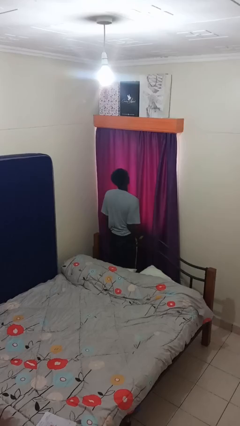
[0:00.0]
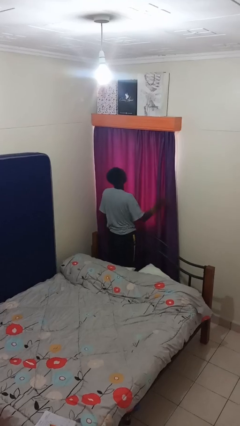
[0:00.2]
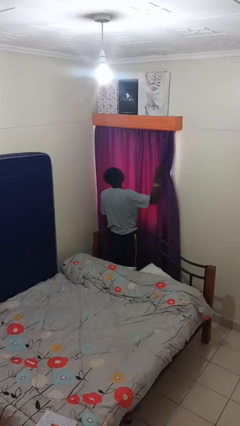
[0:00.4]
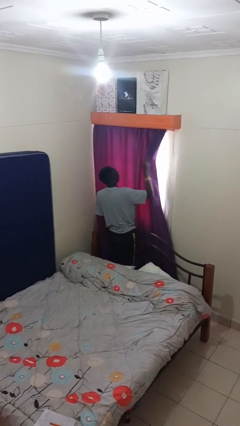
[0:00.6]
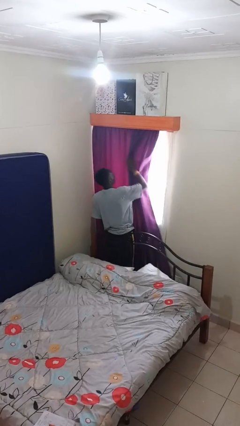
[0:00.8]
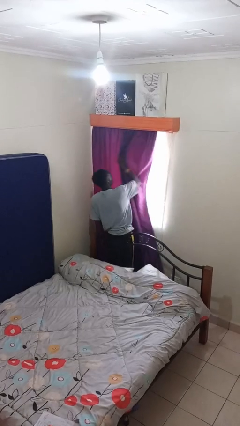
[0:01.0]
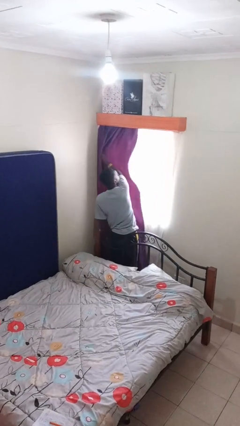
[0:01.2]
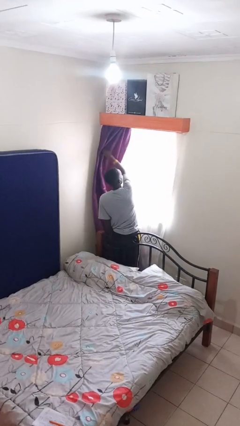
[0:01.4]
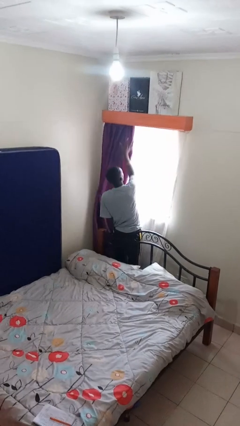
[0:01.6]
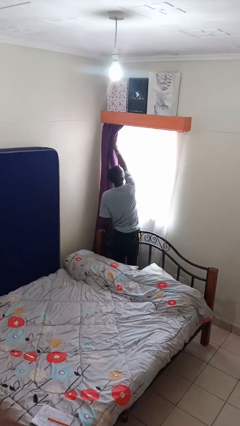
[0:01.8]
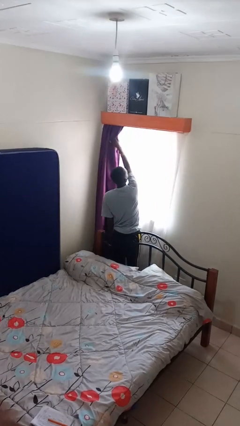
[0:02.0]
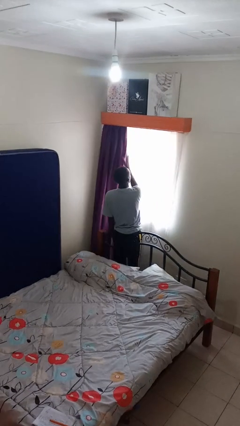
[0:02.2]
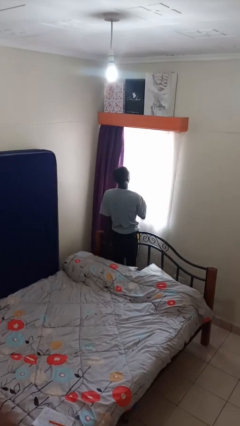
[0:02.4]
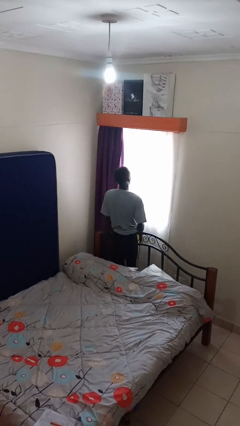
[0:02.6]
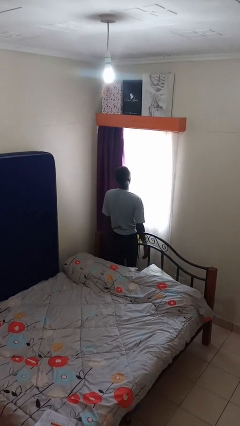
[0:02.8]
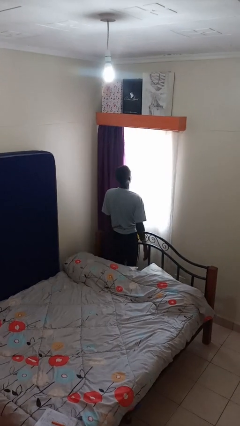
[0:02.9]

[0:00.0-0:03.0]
person opens curtains

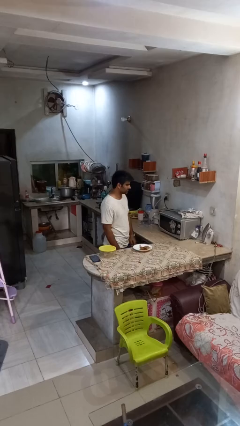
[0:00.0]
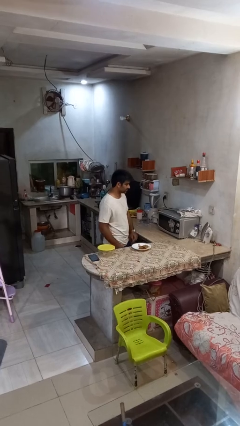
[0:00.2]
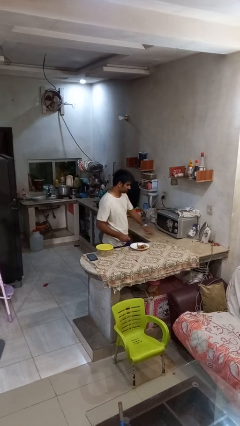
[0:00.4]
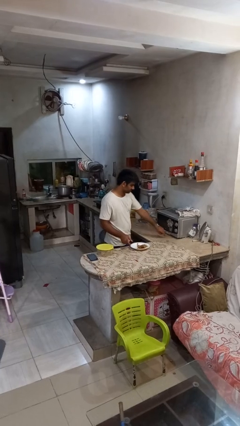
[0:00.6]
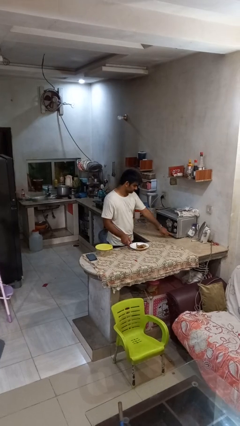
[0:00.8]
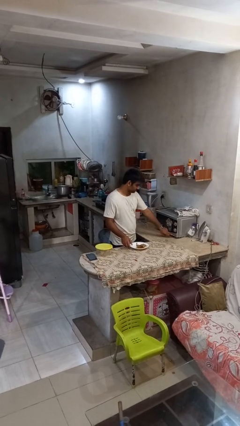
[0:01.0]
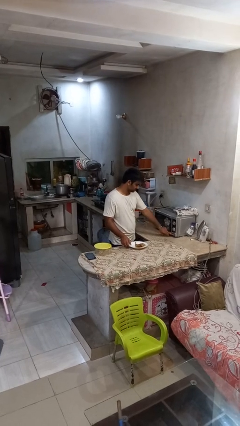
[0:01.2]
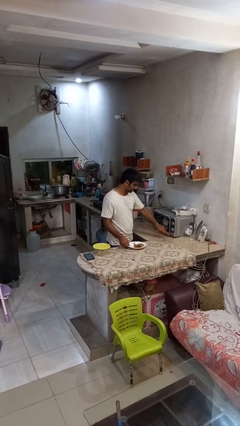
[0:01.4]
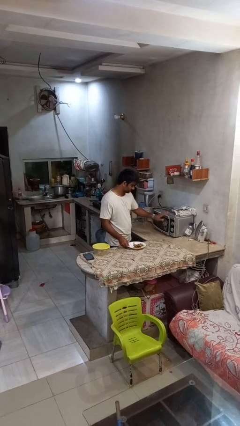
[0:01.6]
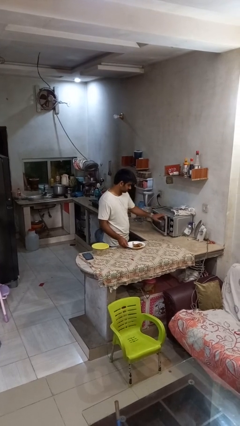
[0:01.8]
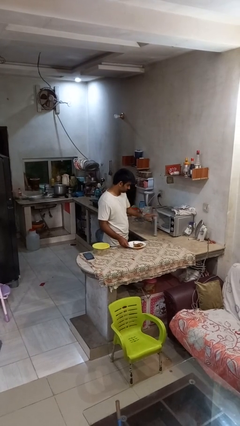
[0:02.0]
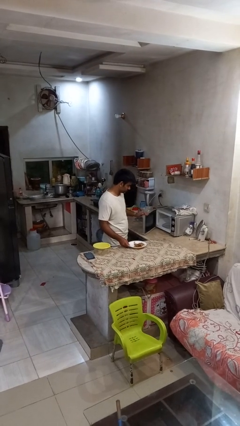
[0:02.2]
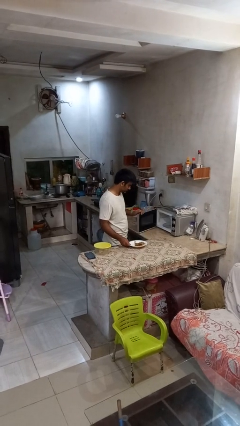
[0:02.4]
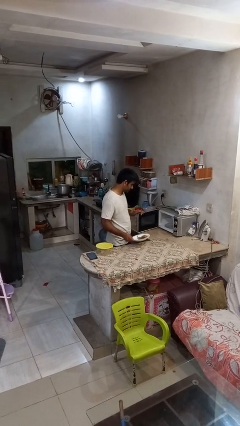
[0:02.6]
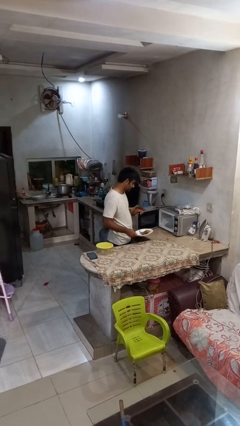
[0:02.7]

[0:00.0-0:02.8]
person opens microwave

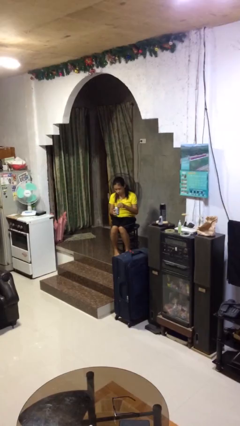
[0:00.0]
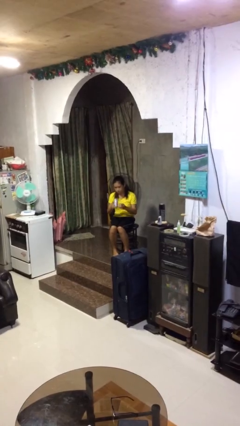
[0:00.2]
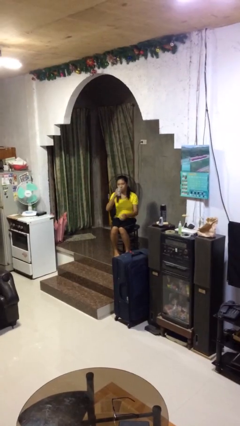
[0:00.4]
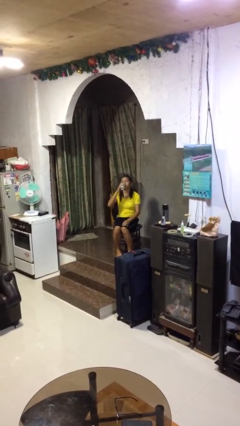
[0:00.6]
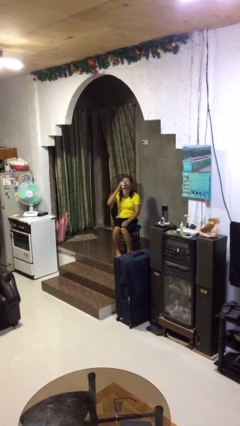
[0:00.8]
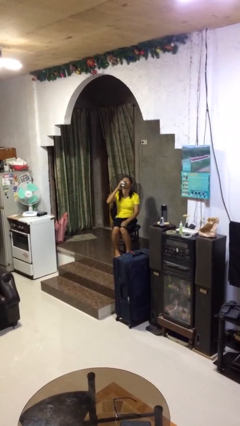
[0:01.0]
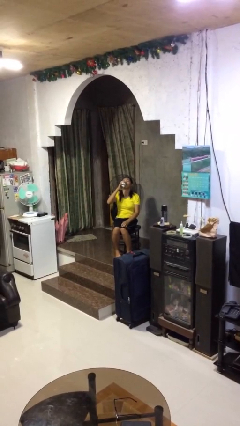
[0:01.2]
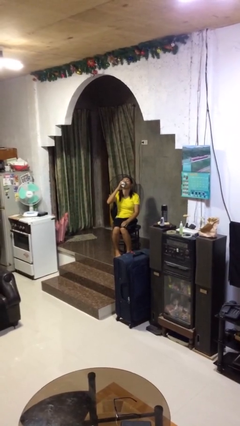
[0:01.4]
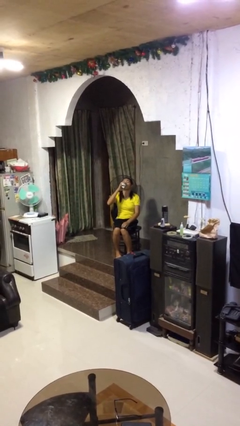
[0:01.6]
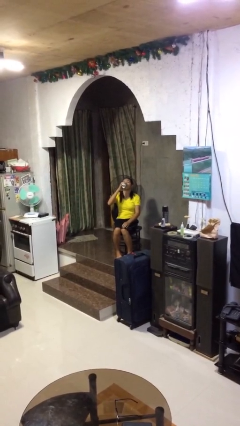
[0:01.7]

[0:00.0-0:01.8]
person drinks from beverage can

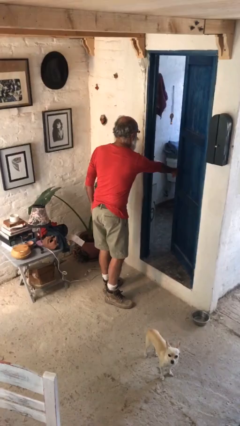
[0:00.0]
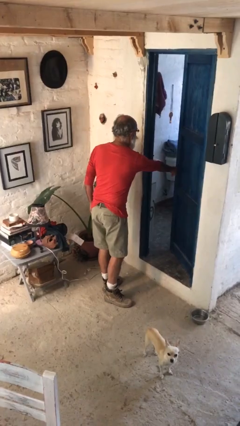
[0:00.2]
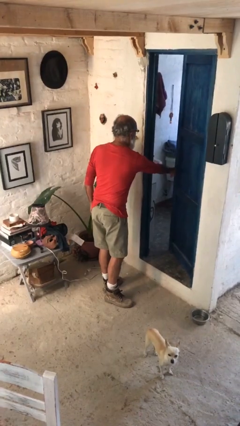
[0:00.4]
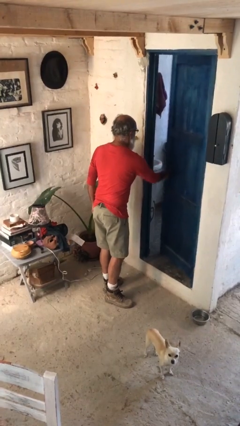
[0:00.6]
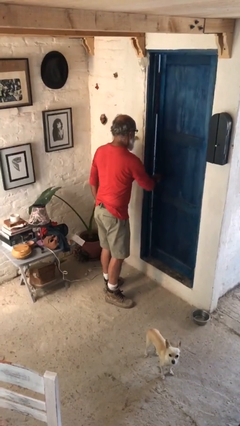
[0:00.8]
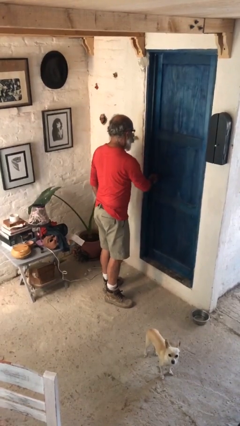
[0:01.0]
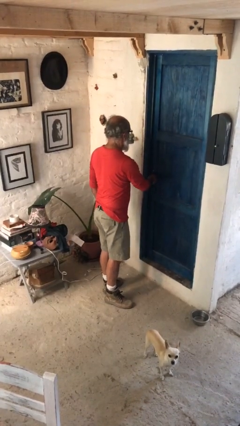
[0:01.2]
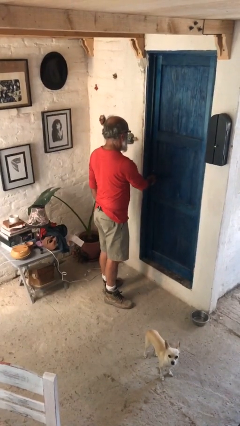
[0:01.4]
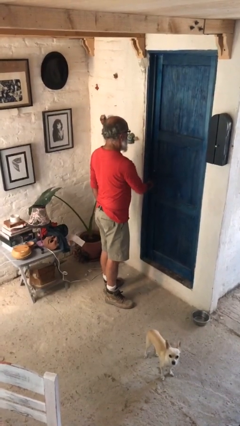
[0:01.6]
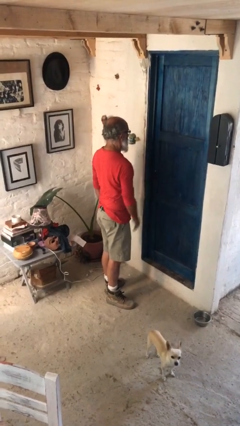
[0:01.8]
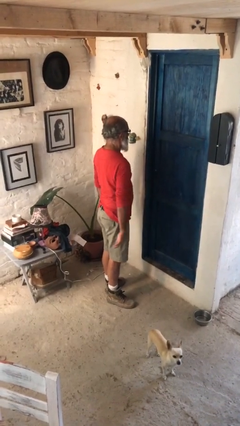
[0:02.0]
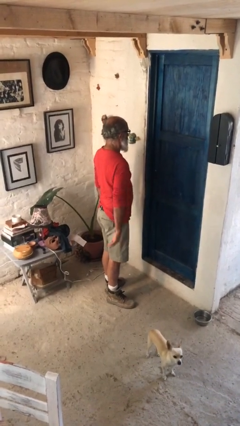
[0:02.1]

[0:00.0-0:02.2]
person closes facility door

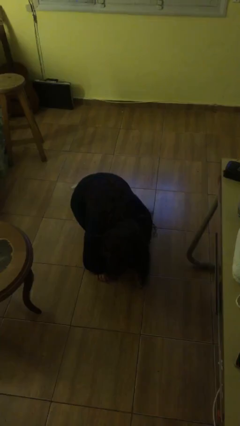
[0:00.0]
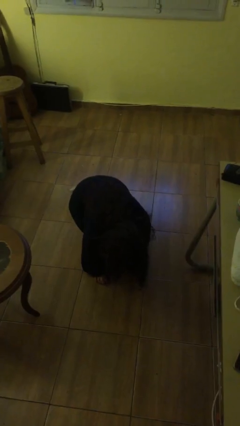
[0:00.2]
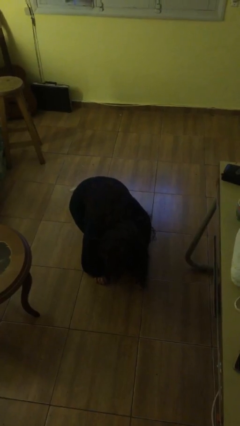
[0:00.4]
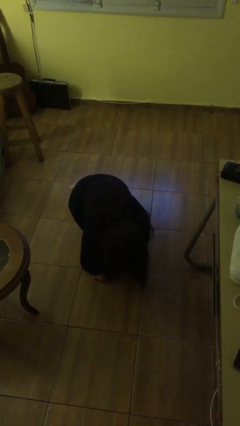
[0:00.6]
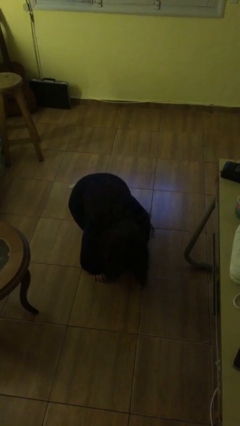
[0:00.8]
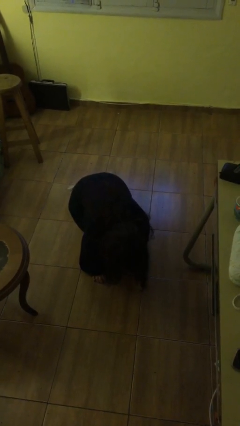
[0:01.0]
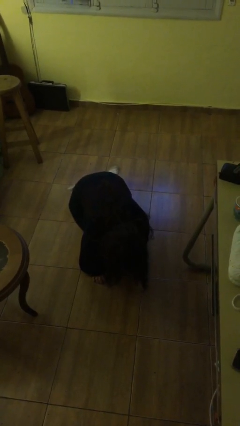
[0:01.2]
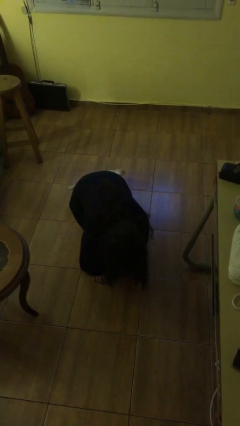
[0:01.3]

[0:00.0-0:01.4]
person crawls

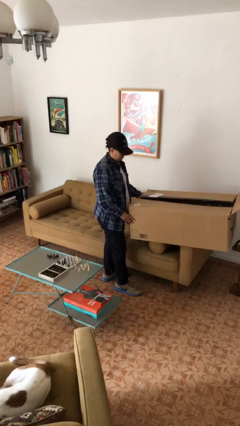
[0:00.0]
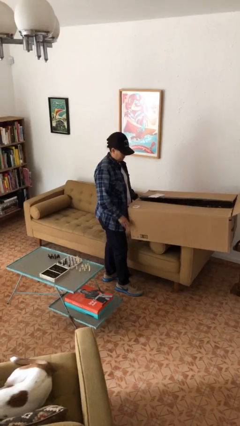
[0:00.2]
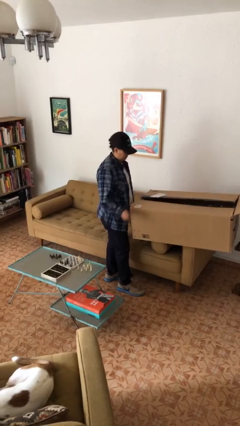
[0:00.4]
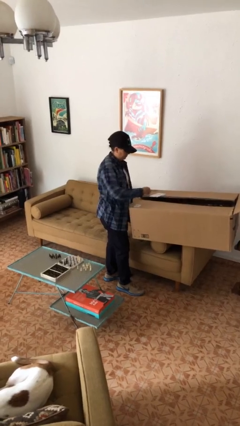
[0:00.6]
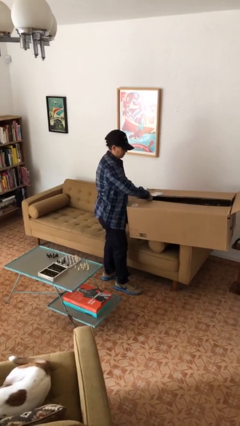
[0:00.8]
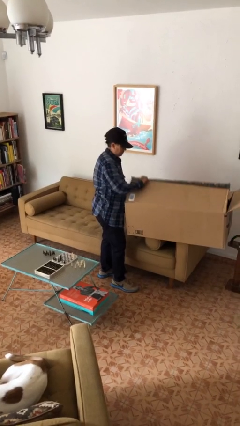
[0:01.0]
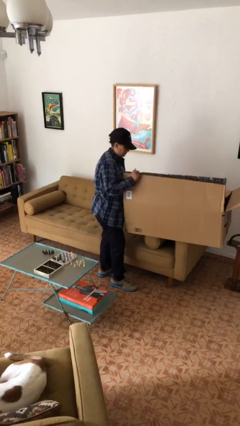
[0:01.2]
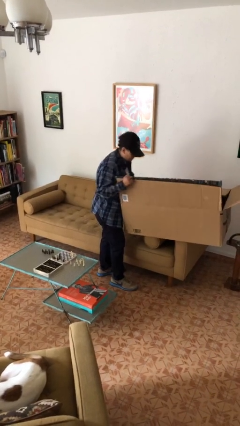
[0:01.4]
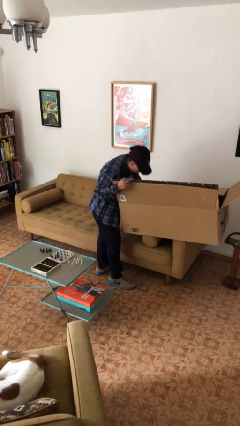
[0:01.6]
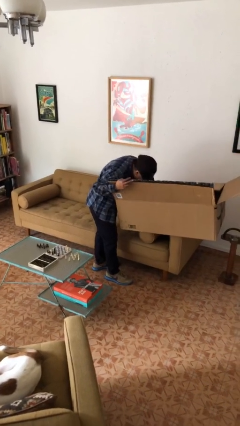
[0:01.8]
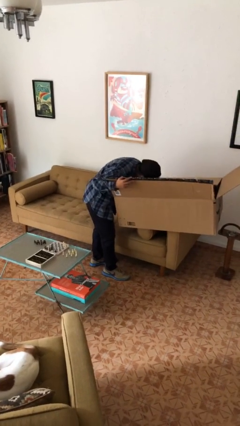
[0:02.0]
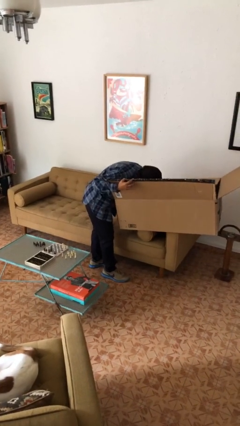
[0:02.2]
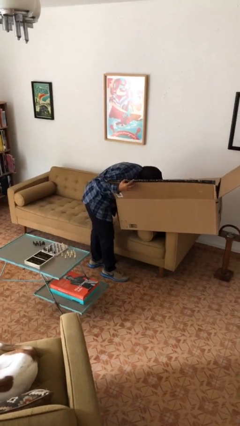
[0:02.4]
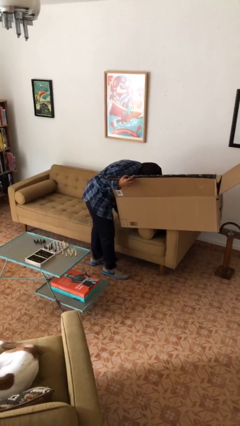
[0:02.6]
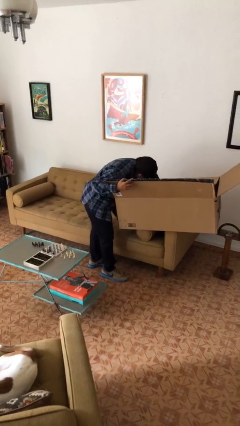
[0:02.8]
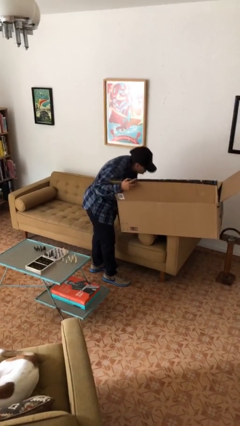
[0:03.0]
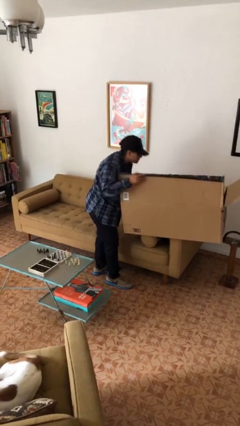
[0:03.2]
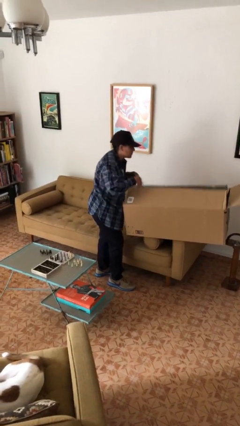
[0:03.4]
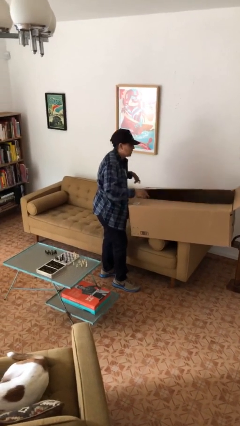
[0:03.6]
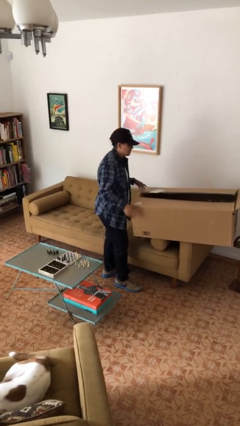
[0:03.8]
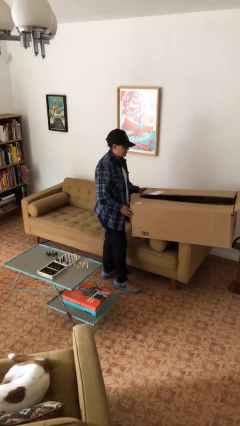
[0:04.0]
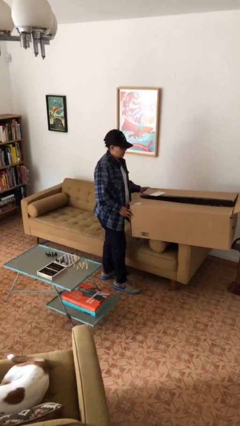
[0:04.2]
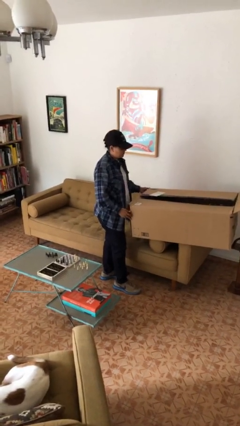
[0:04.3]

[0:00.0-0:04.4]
person searches in box

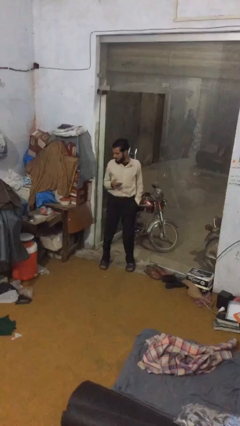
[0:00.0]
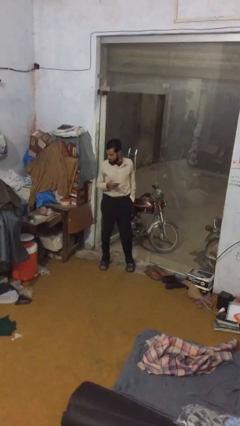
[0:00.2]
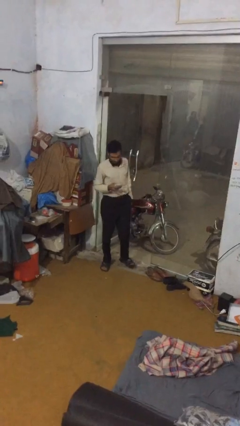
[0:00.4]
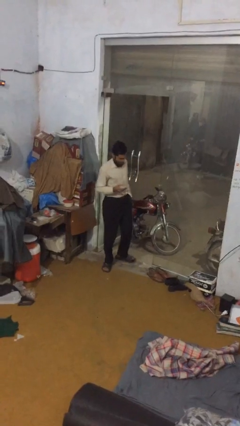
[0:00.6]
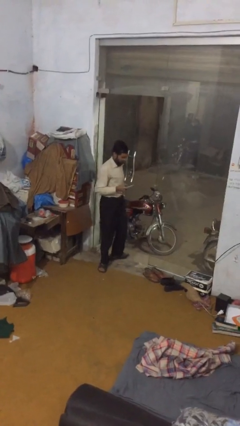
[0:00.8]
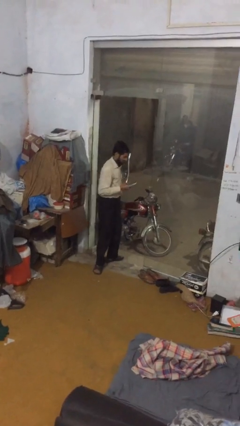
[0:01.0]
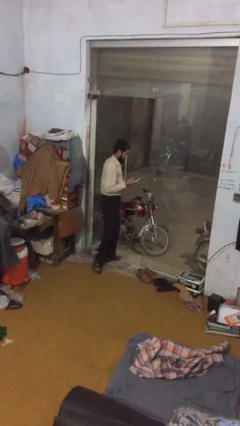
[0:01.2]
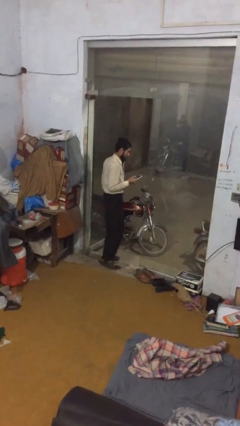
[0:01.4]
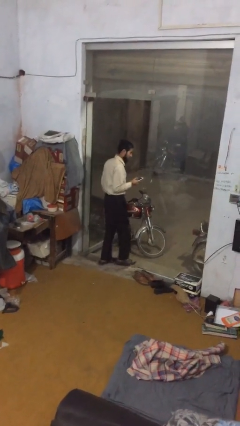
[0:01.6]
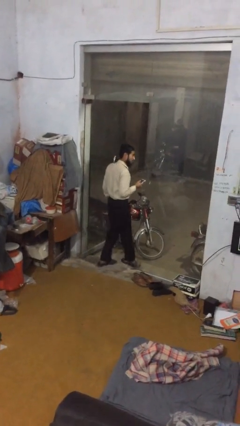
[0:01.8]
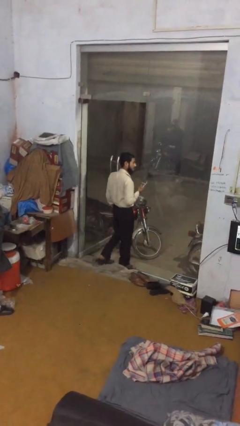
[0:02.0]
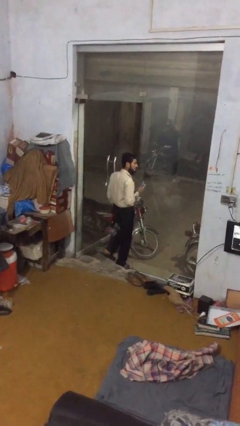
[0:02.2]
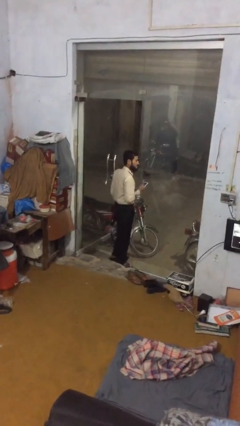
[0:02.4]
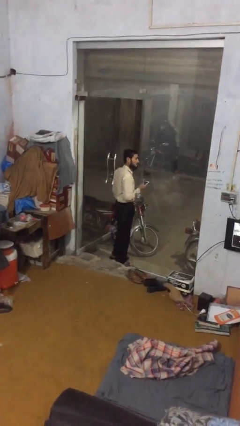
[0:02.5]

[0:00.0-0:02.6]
person exits scene through structure
